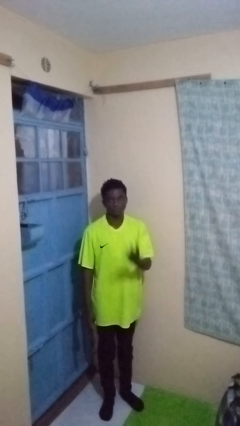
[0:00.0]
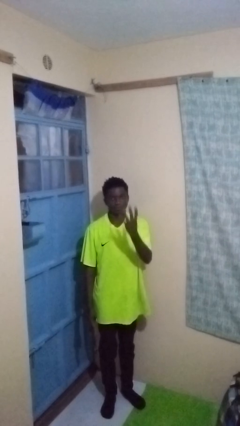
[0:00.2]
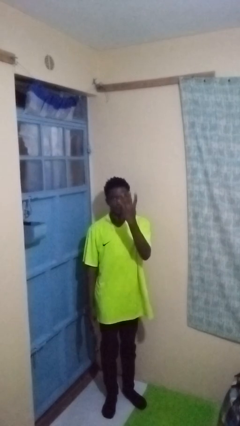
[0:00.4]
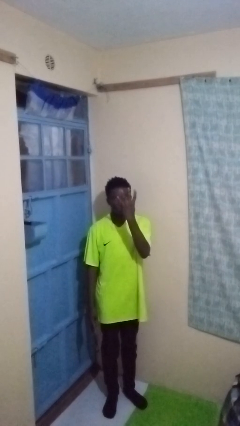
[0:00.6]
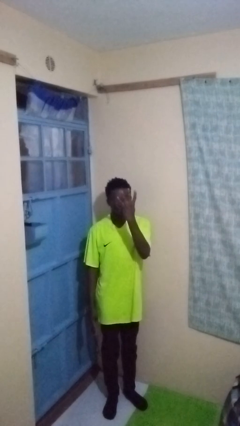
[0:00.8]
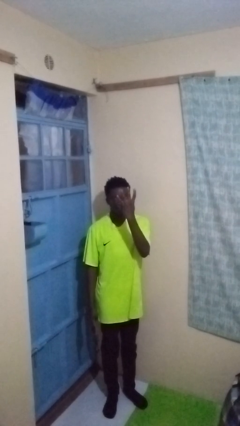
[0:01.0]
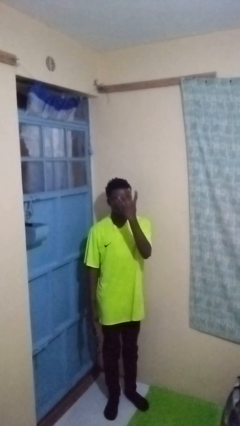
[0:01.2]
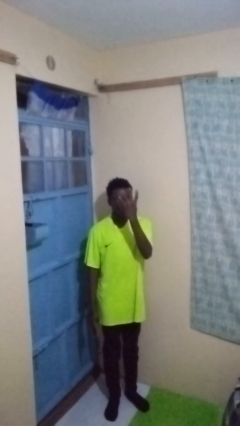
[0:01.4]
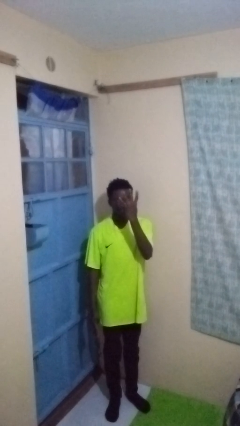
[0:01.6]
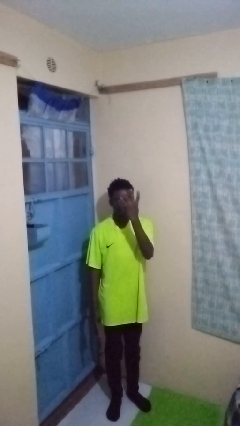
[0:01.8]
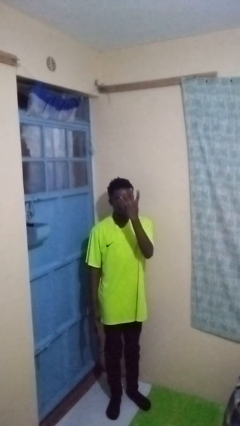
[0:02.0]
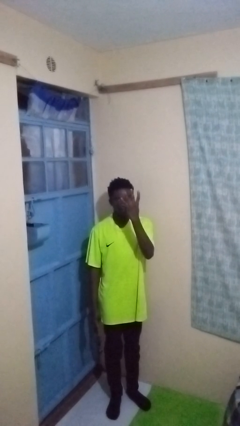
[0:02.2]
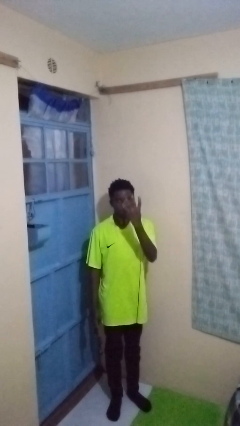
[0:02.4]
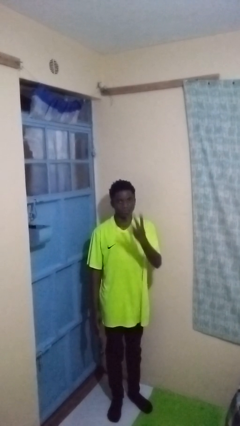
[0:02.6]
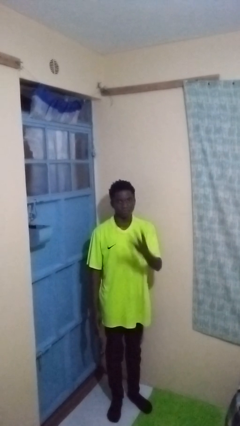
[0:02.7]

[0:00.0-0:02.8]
person gestures number four

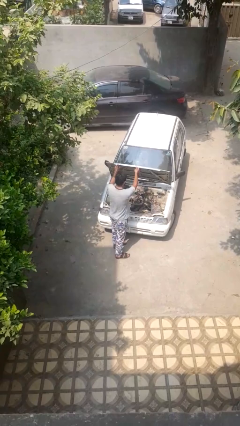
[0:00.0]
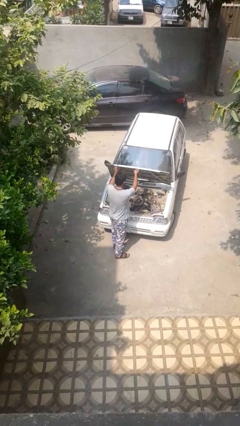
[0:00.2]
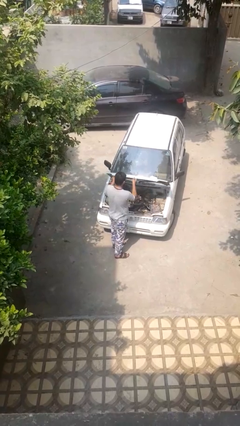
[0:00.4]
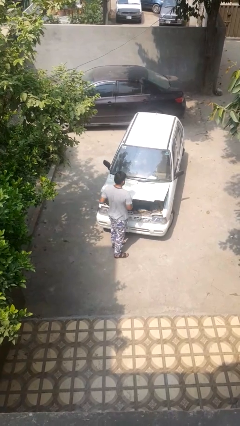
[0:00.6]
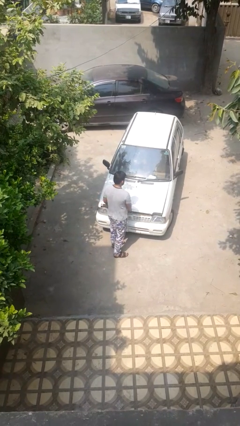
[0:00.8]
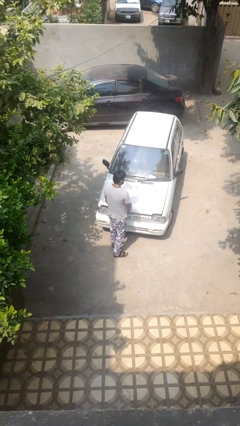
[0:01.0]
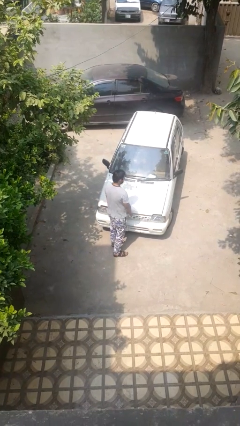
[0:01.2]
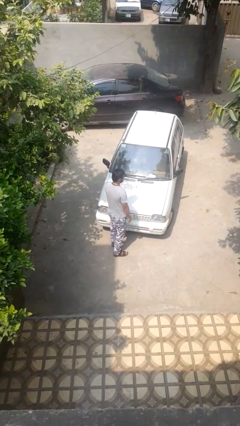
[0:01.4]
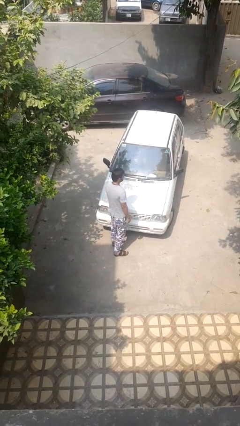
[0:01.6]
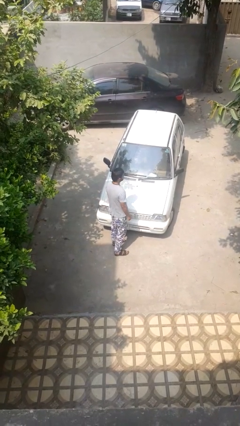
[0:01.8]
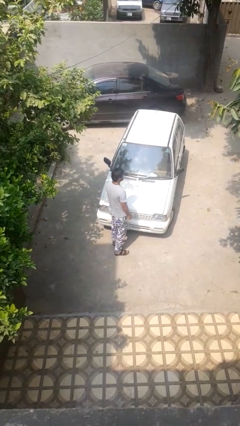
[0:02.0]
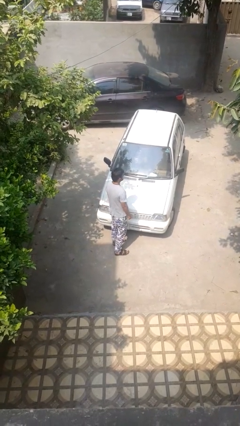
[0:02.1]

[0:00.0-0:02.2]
person closes car hood

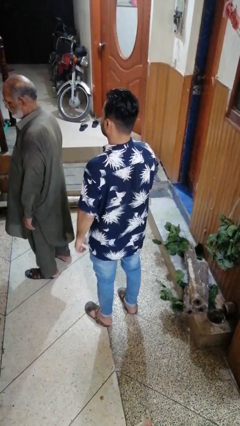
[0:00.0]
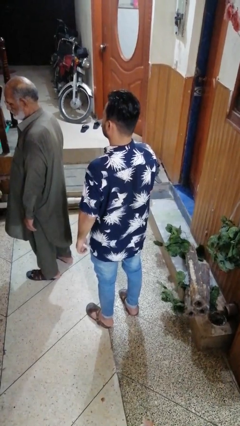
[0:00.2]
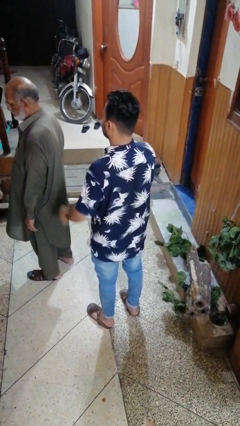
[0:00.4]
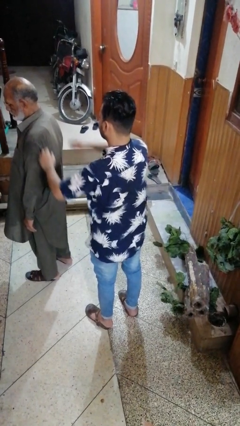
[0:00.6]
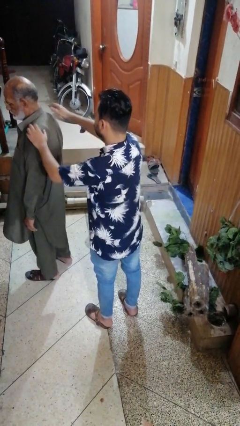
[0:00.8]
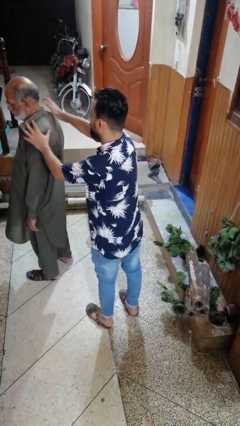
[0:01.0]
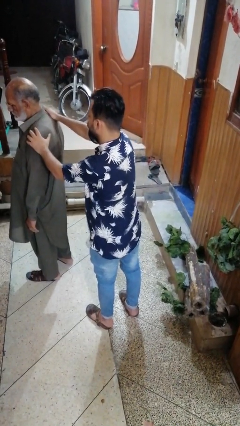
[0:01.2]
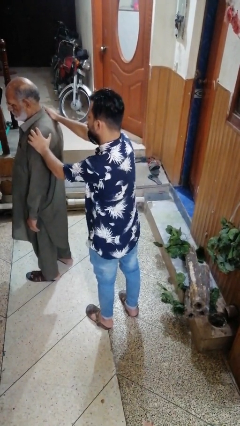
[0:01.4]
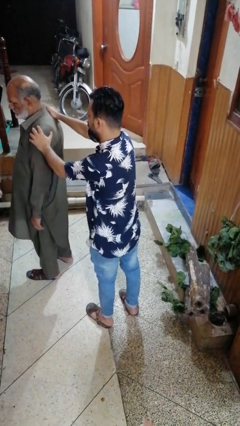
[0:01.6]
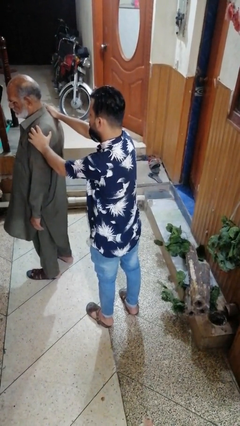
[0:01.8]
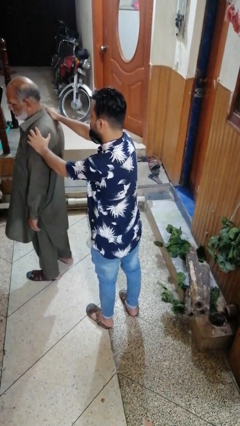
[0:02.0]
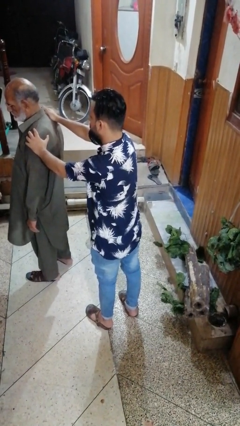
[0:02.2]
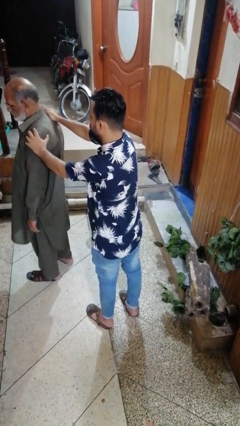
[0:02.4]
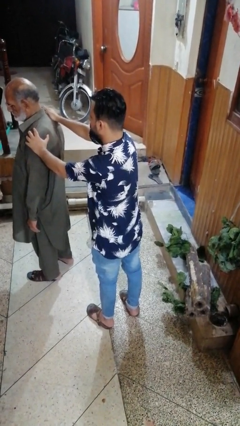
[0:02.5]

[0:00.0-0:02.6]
person grabs person by shoulder

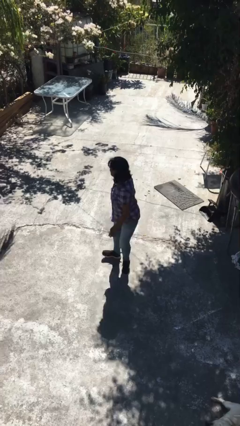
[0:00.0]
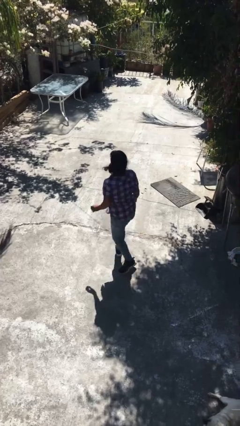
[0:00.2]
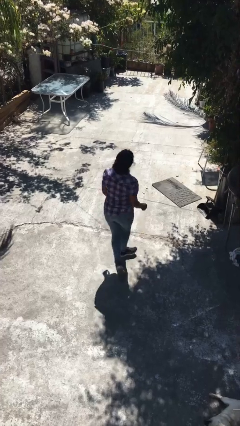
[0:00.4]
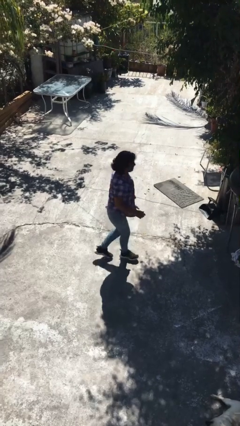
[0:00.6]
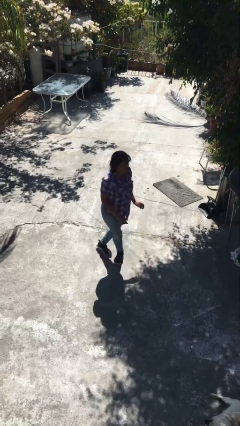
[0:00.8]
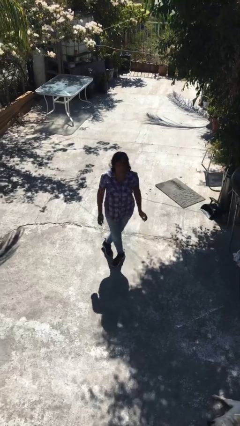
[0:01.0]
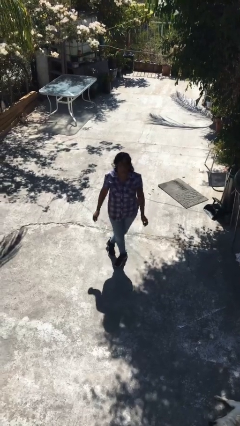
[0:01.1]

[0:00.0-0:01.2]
person twirls

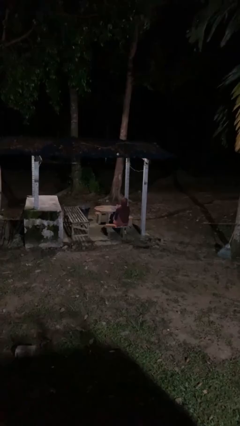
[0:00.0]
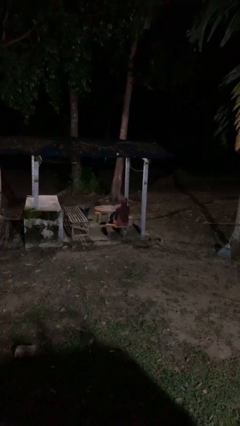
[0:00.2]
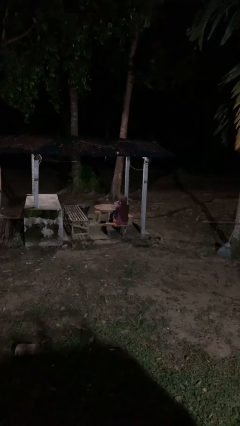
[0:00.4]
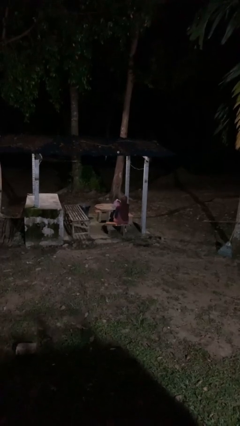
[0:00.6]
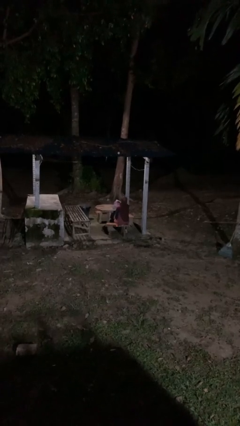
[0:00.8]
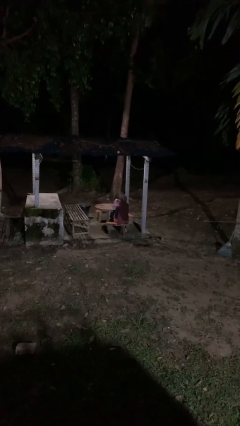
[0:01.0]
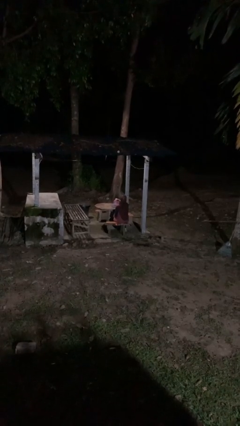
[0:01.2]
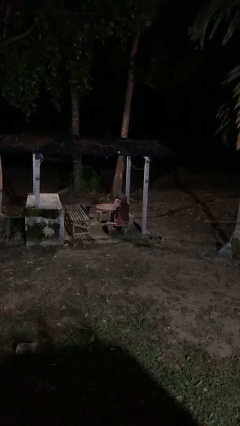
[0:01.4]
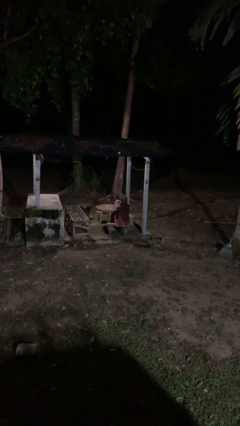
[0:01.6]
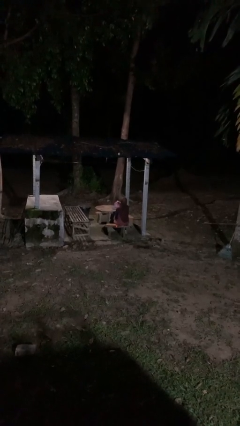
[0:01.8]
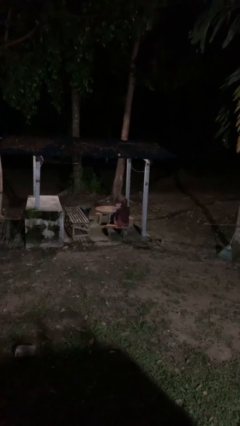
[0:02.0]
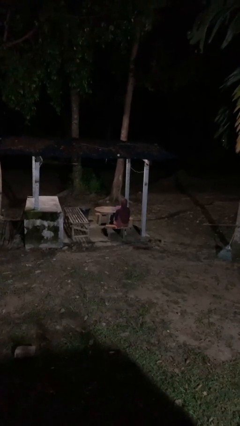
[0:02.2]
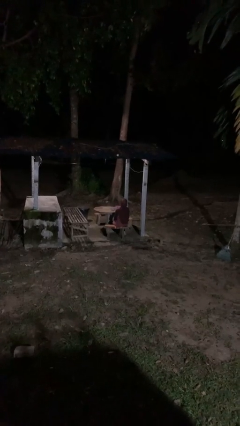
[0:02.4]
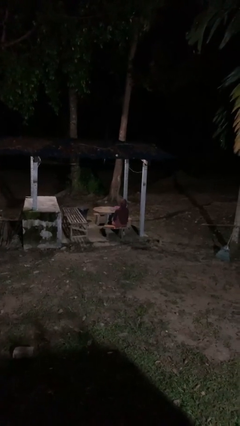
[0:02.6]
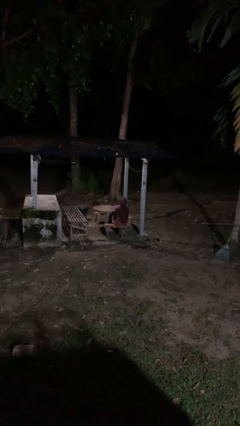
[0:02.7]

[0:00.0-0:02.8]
person pours coffee into mug

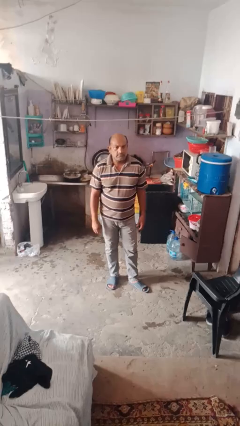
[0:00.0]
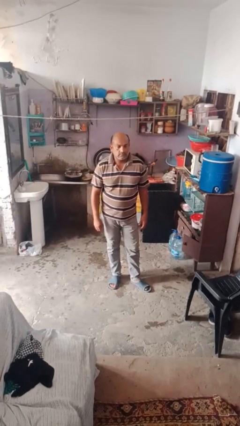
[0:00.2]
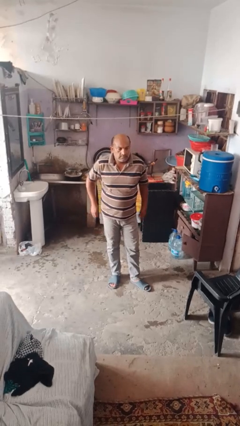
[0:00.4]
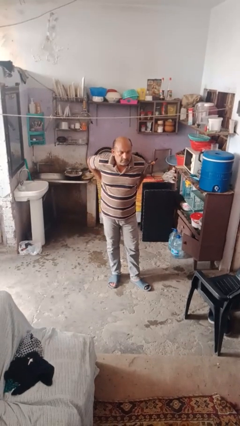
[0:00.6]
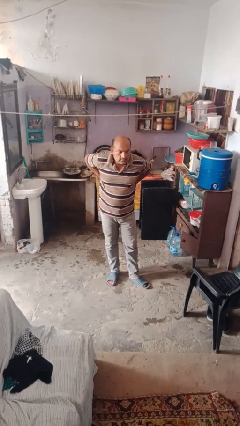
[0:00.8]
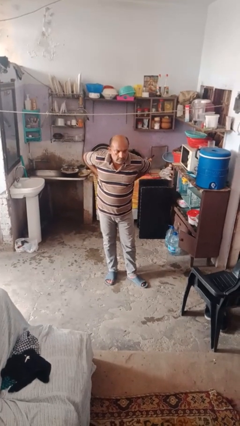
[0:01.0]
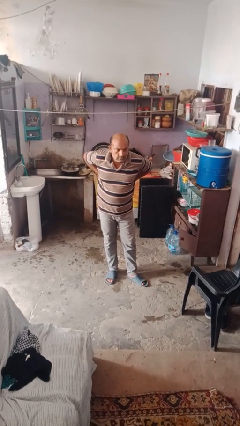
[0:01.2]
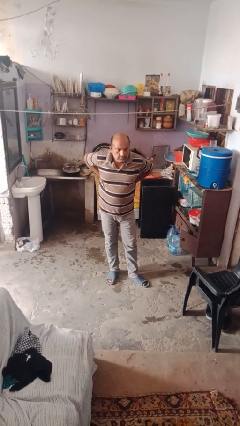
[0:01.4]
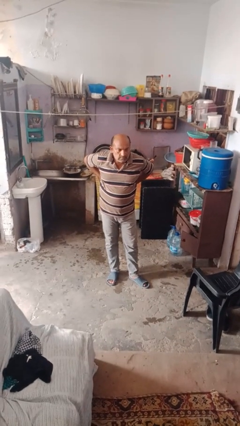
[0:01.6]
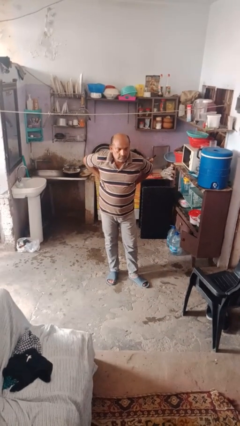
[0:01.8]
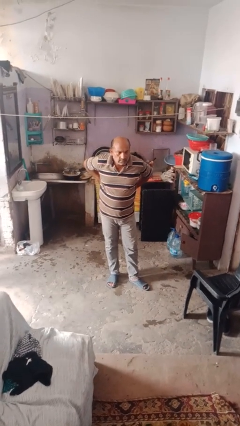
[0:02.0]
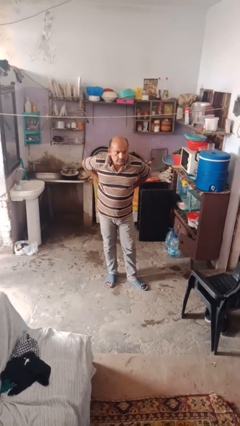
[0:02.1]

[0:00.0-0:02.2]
person stretches back

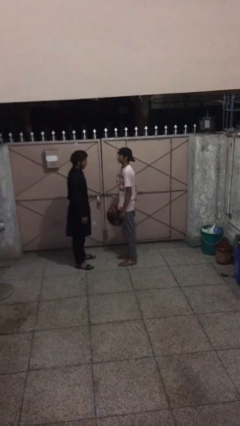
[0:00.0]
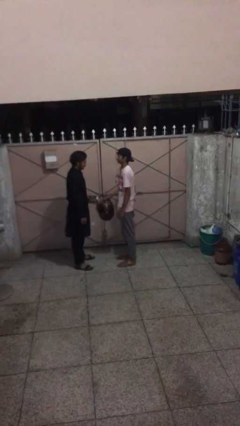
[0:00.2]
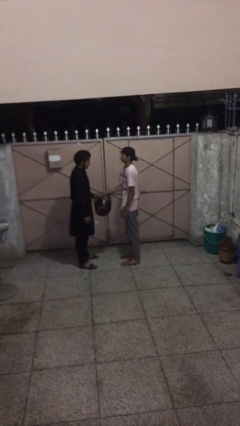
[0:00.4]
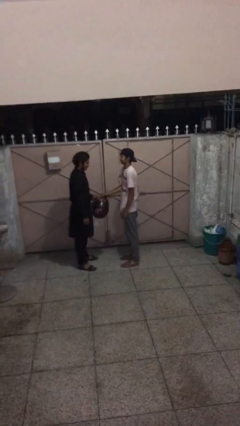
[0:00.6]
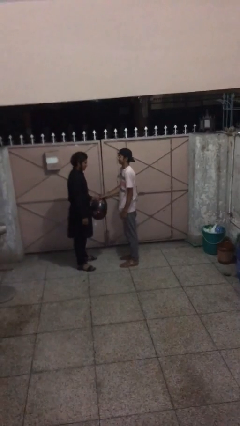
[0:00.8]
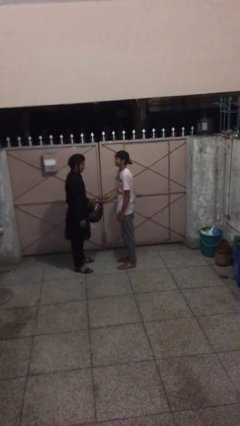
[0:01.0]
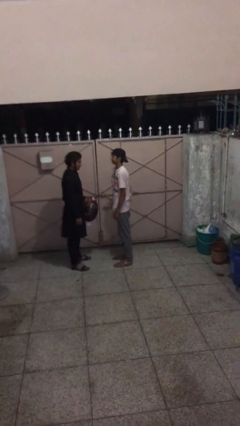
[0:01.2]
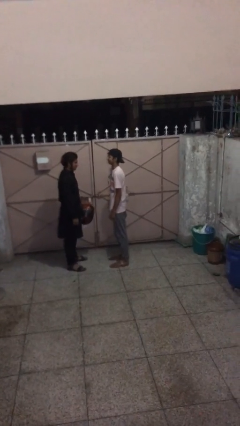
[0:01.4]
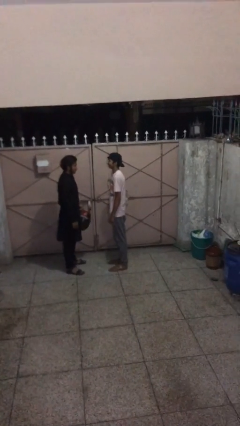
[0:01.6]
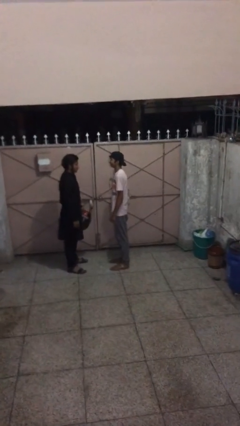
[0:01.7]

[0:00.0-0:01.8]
person transfers object to person

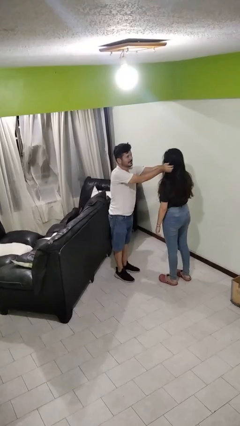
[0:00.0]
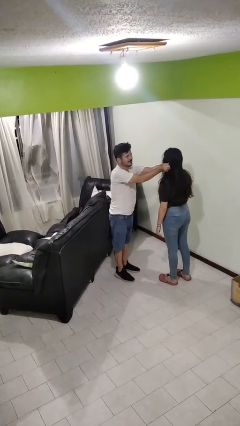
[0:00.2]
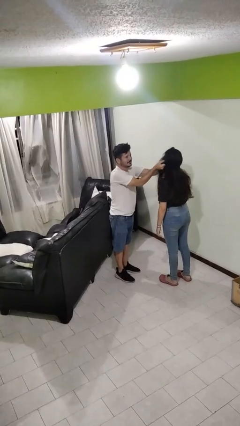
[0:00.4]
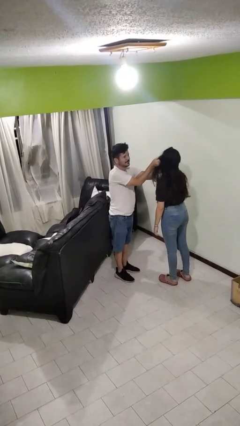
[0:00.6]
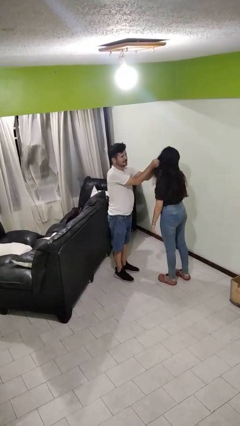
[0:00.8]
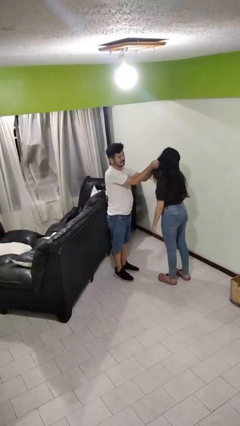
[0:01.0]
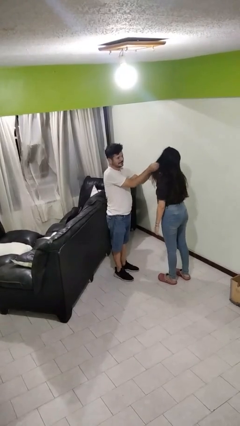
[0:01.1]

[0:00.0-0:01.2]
person grabs person by hair

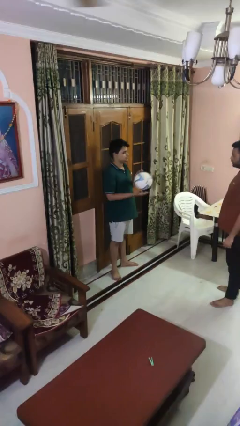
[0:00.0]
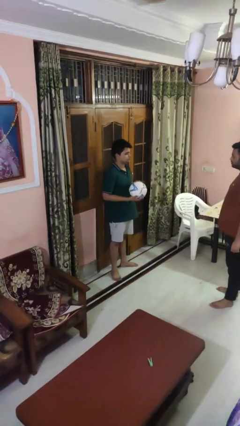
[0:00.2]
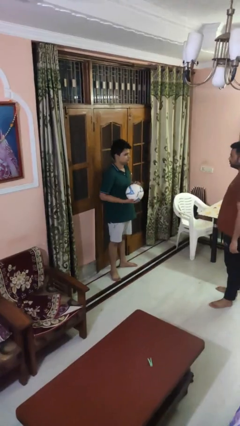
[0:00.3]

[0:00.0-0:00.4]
person catches object from person
